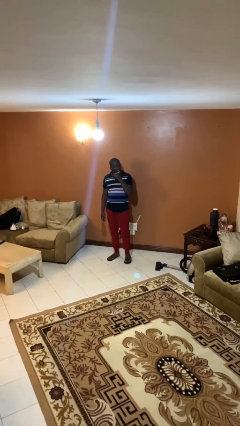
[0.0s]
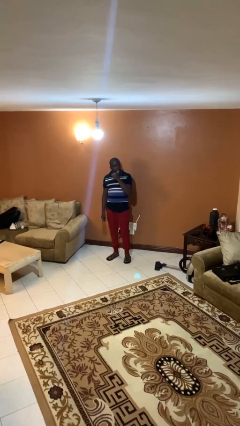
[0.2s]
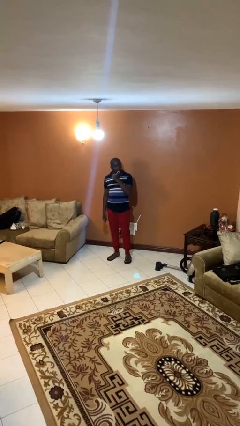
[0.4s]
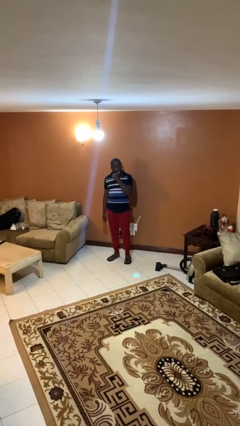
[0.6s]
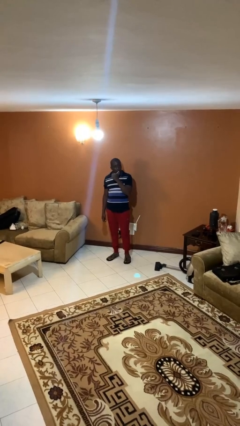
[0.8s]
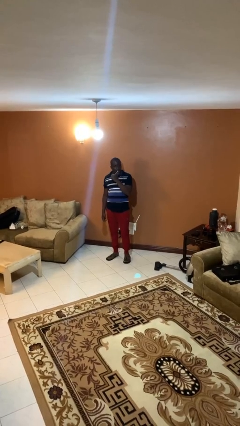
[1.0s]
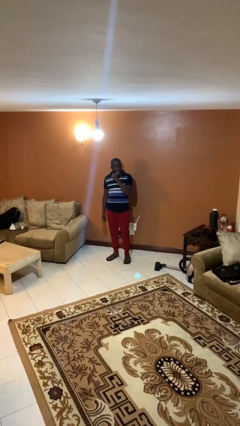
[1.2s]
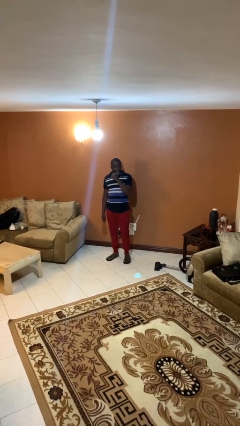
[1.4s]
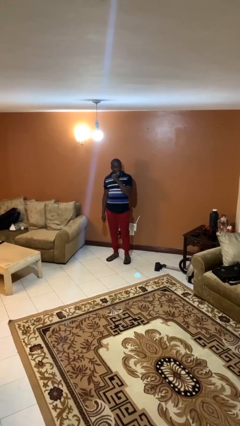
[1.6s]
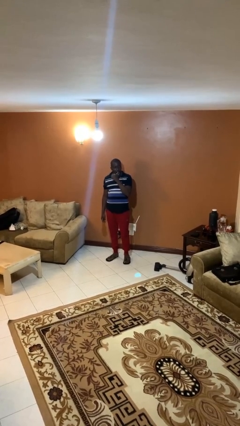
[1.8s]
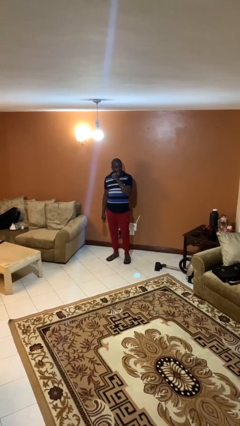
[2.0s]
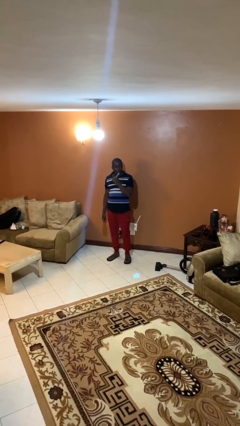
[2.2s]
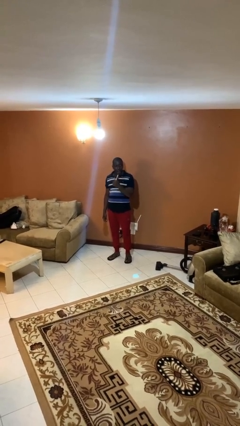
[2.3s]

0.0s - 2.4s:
person brushes teeth

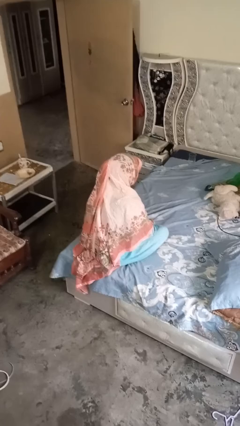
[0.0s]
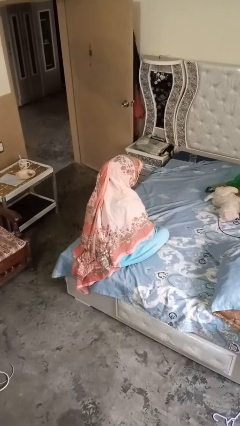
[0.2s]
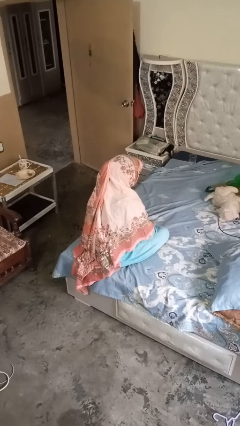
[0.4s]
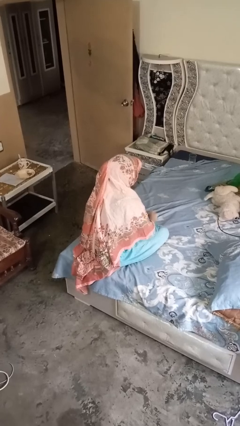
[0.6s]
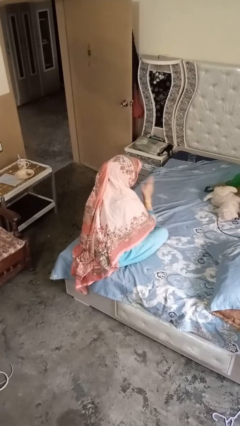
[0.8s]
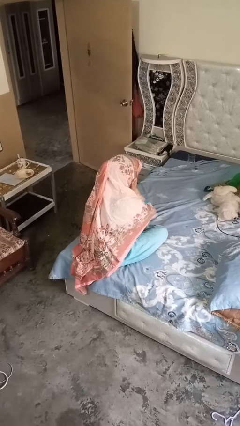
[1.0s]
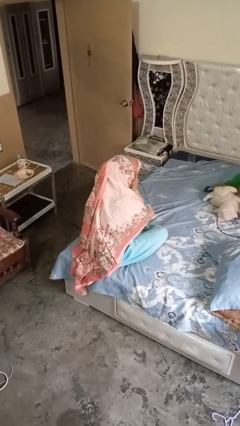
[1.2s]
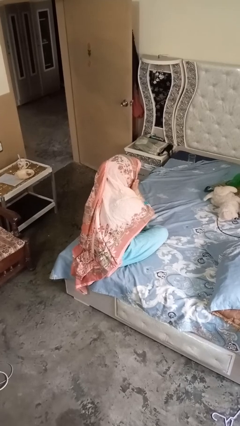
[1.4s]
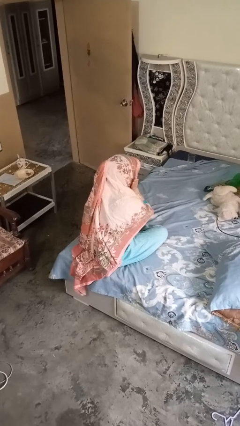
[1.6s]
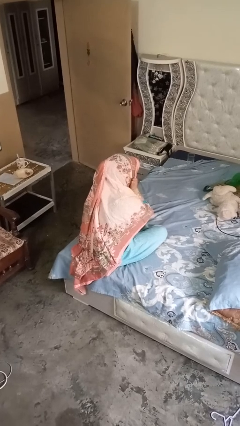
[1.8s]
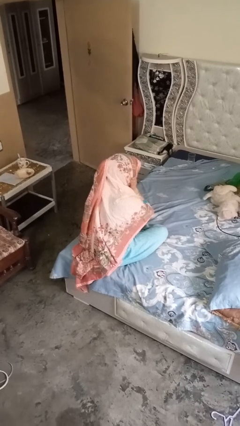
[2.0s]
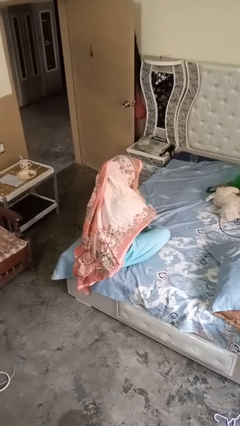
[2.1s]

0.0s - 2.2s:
person strokes chin

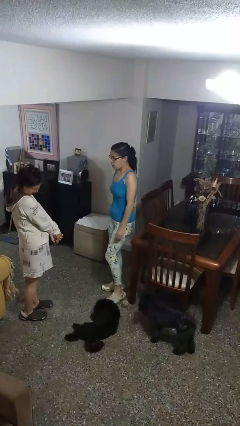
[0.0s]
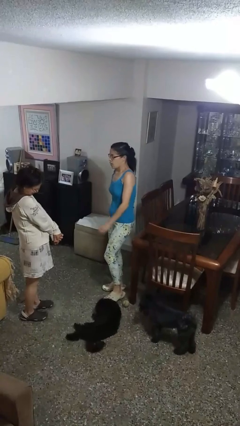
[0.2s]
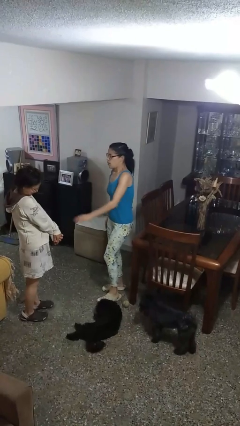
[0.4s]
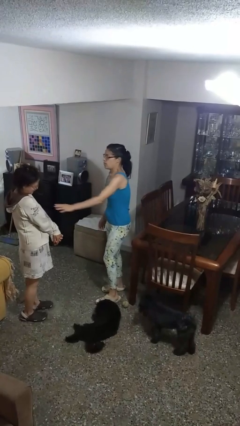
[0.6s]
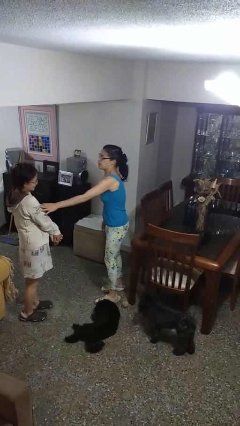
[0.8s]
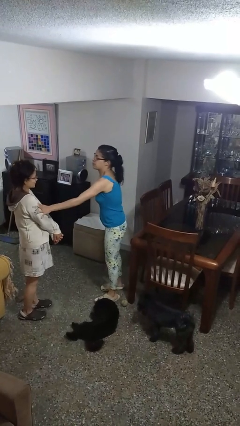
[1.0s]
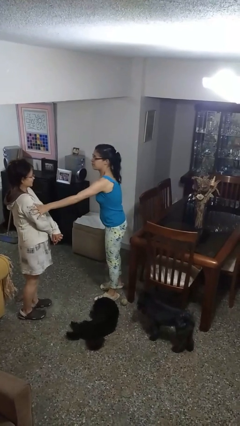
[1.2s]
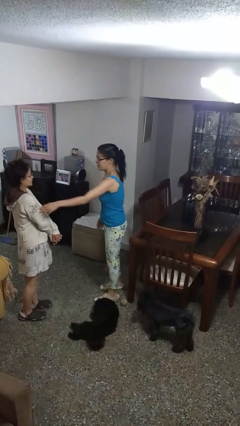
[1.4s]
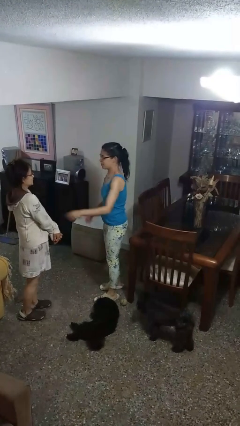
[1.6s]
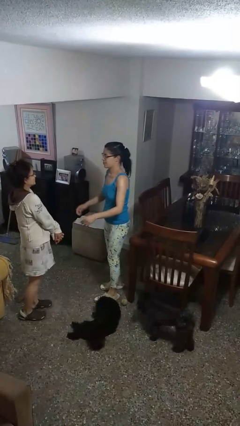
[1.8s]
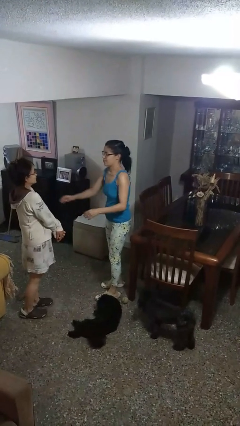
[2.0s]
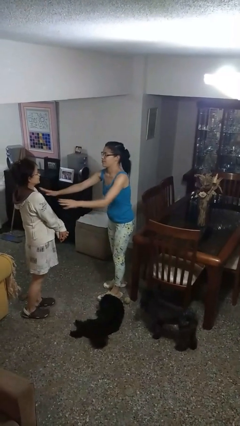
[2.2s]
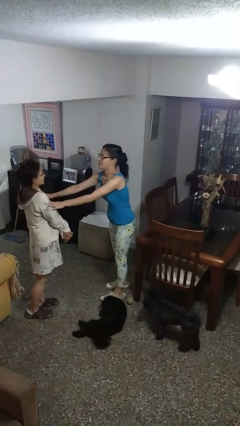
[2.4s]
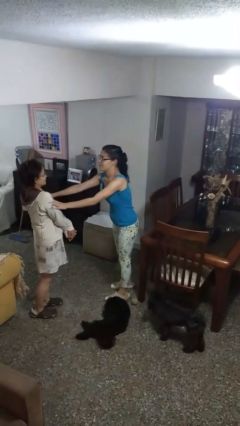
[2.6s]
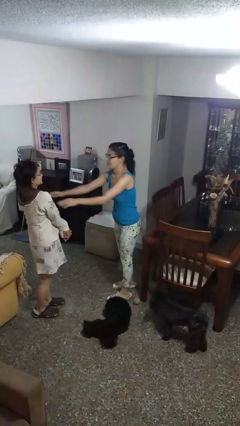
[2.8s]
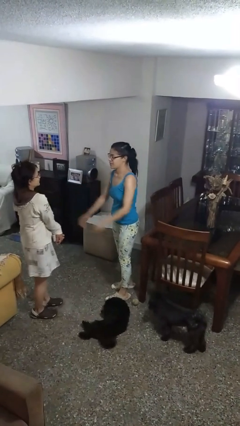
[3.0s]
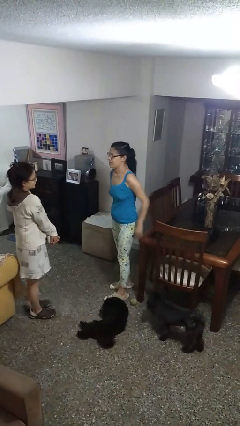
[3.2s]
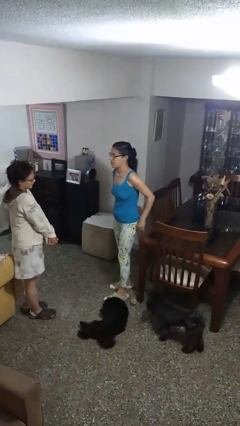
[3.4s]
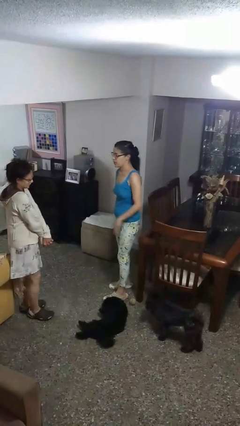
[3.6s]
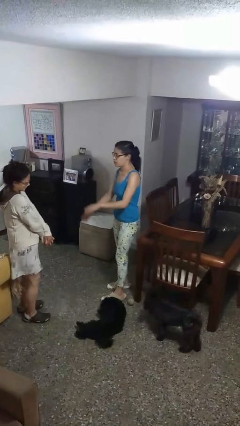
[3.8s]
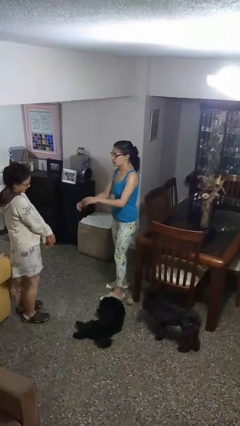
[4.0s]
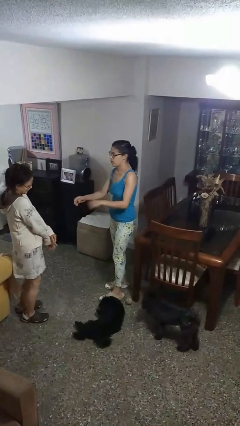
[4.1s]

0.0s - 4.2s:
person shoves person

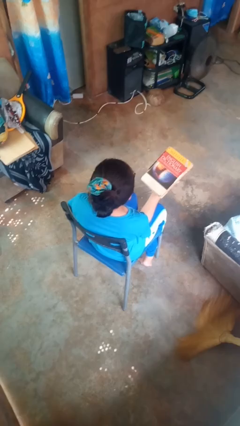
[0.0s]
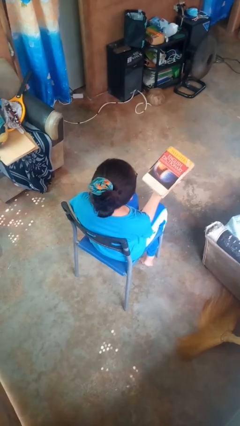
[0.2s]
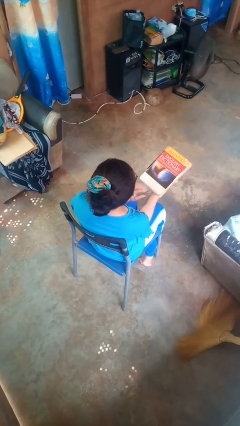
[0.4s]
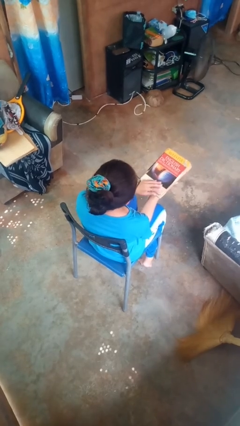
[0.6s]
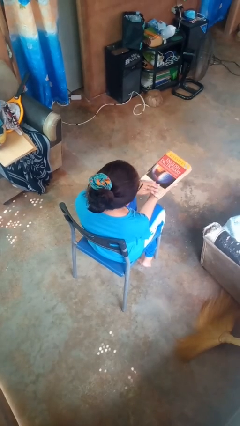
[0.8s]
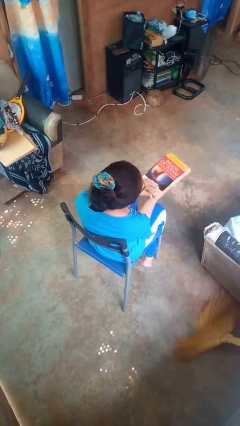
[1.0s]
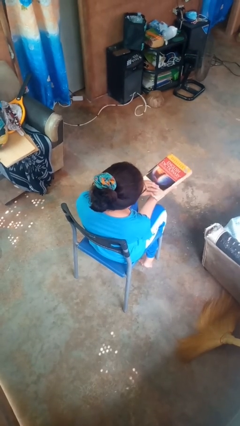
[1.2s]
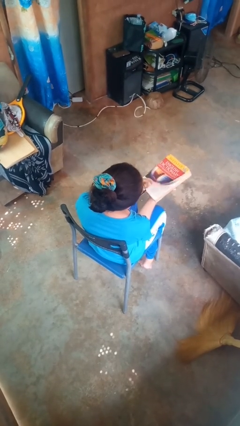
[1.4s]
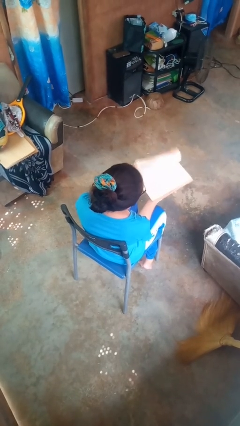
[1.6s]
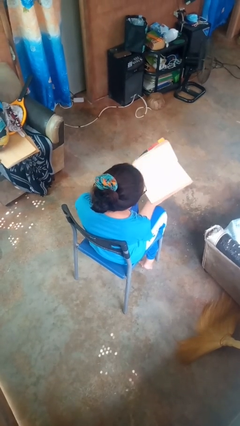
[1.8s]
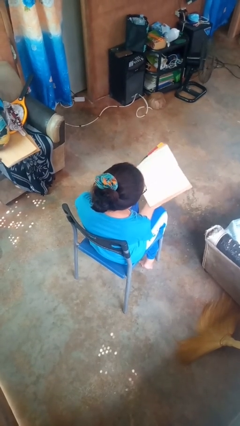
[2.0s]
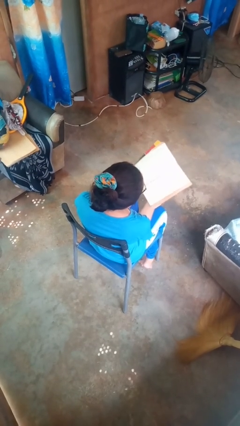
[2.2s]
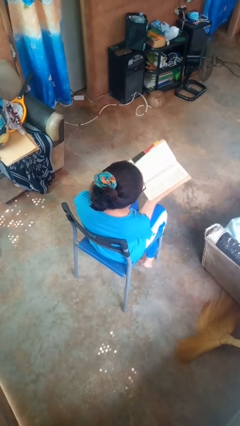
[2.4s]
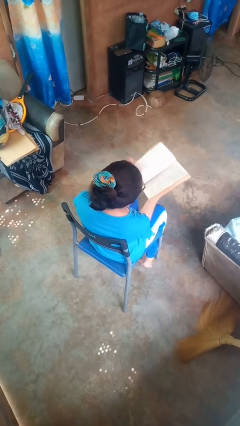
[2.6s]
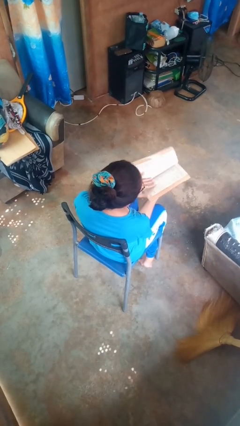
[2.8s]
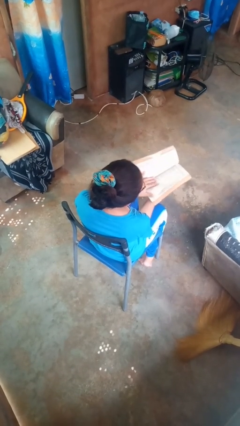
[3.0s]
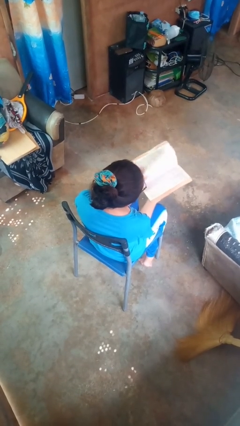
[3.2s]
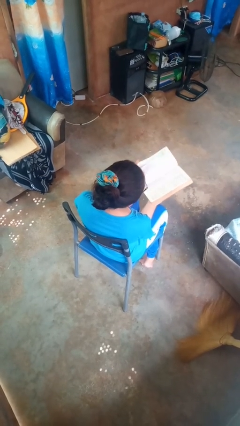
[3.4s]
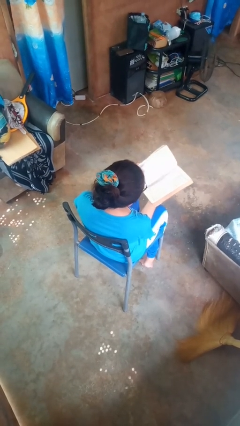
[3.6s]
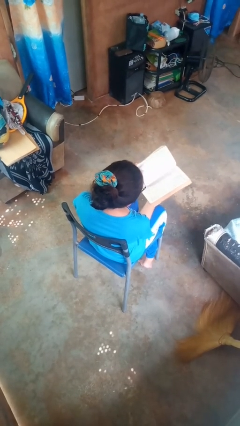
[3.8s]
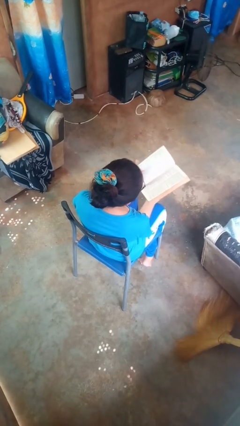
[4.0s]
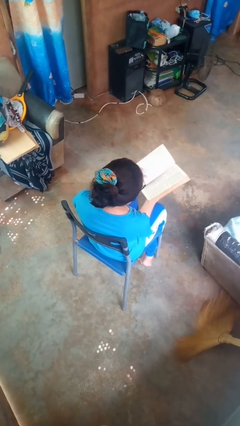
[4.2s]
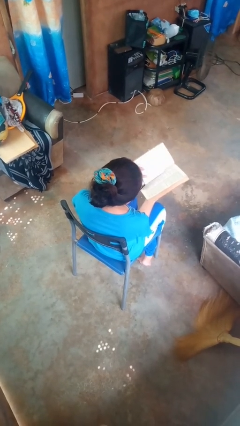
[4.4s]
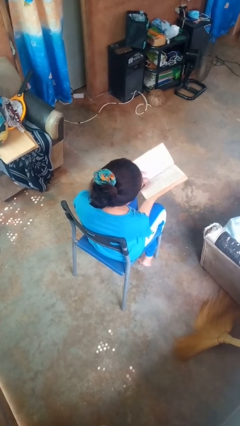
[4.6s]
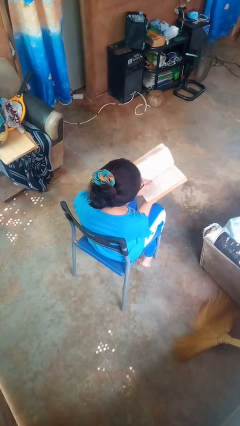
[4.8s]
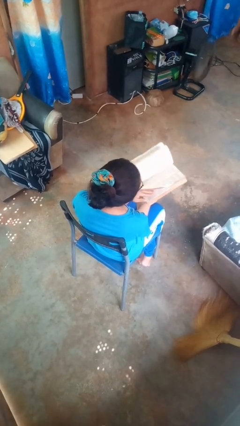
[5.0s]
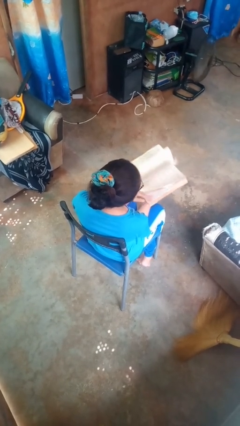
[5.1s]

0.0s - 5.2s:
person reads book

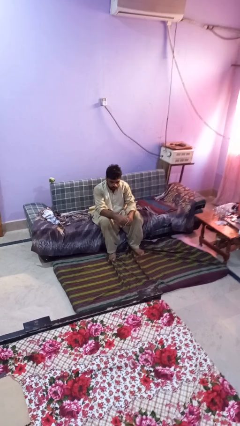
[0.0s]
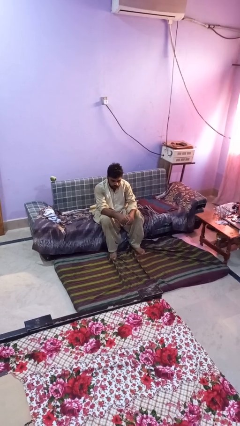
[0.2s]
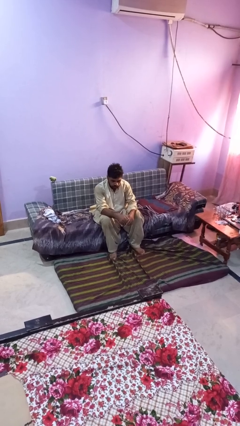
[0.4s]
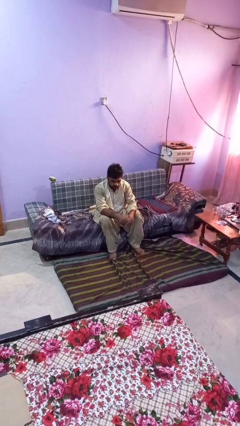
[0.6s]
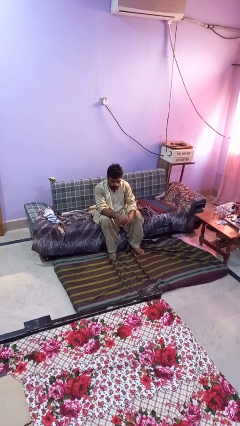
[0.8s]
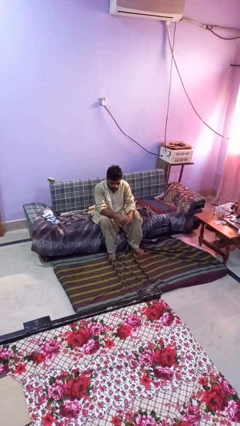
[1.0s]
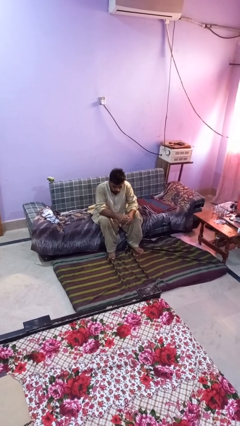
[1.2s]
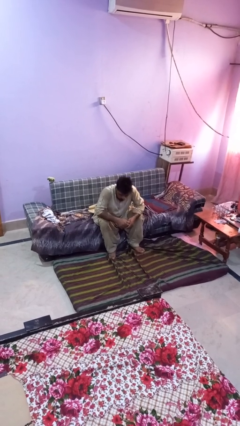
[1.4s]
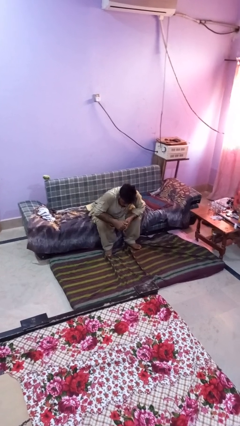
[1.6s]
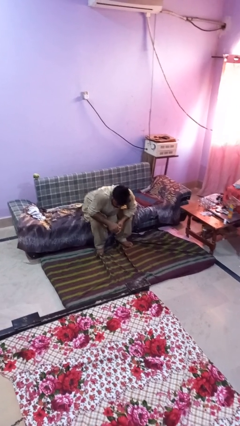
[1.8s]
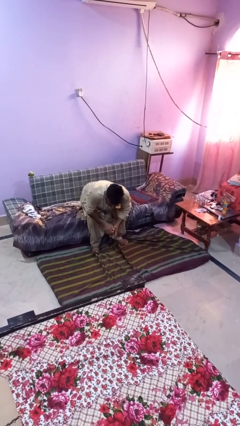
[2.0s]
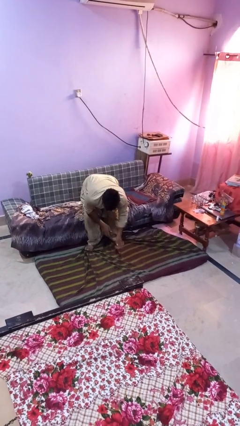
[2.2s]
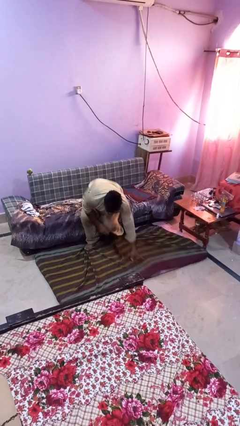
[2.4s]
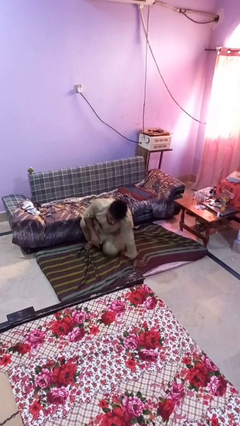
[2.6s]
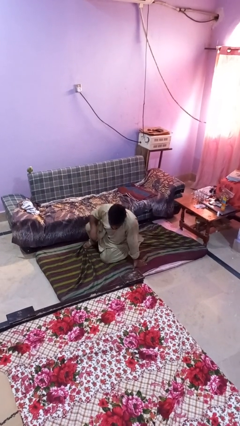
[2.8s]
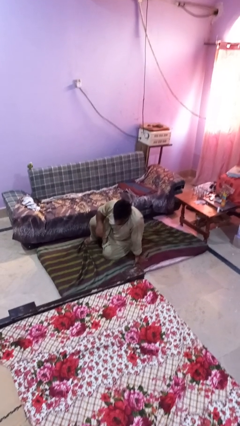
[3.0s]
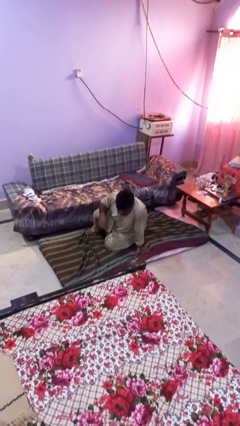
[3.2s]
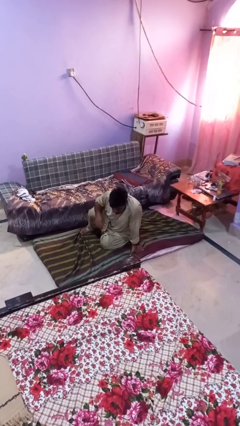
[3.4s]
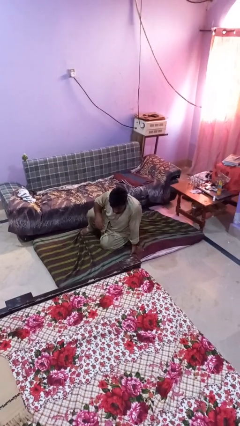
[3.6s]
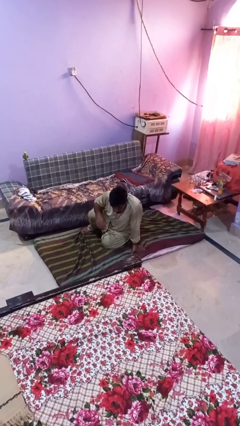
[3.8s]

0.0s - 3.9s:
person falls from chair
